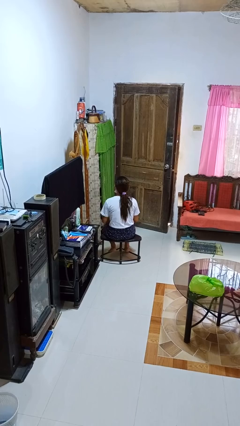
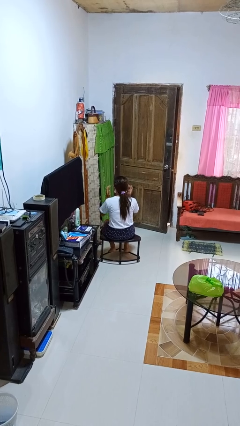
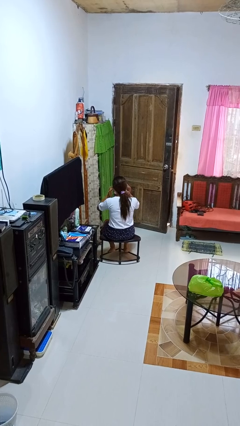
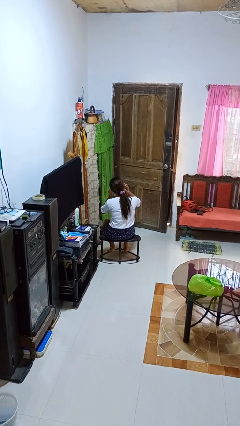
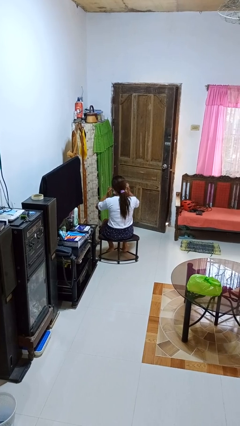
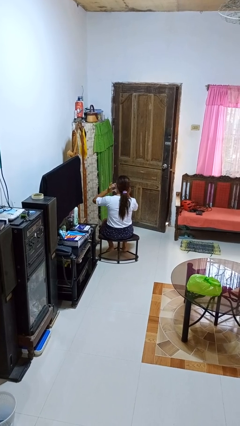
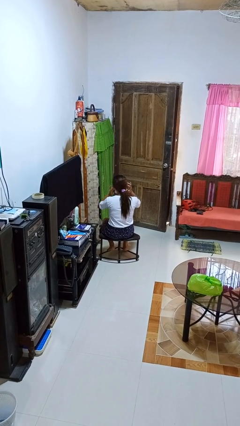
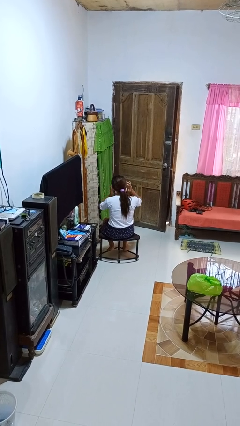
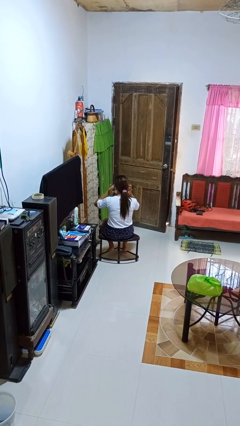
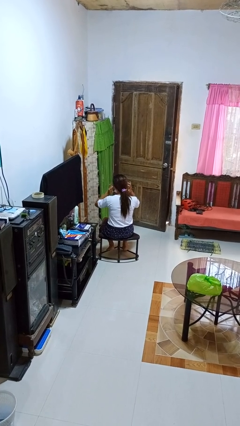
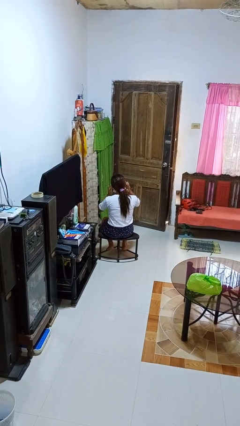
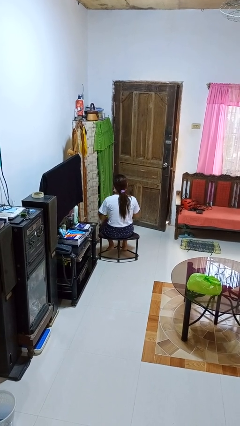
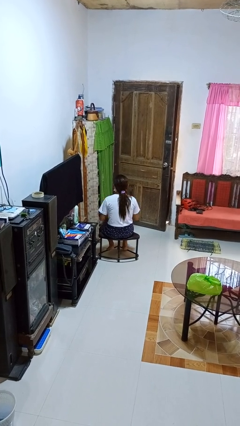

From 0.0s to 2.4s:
person puts fingers in ear

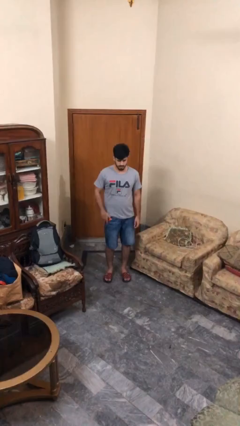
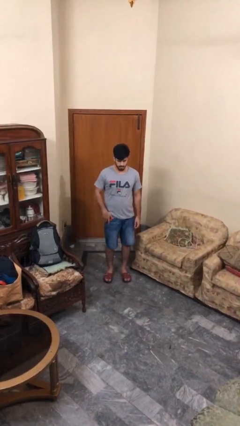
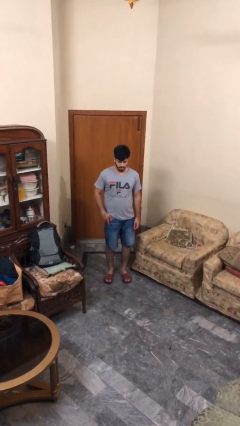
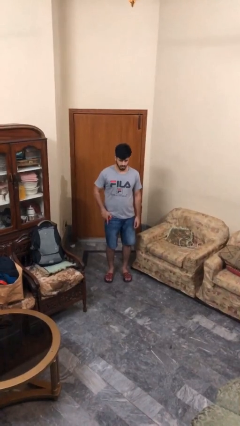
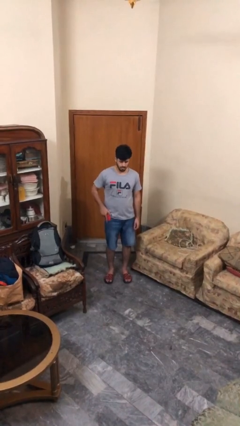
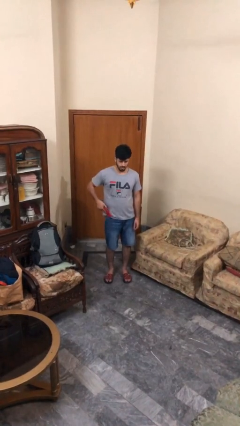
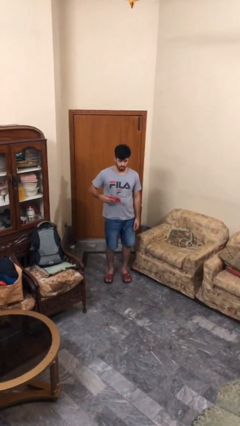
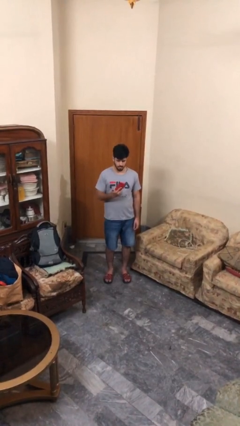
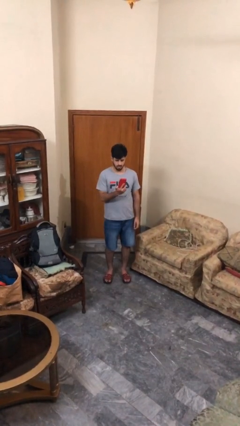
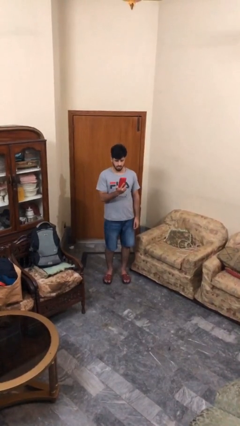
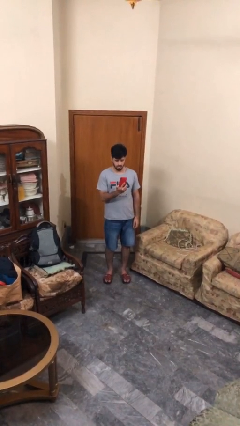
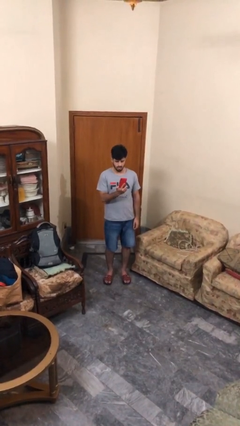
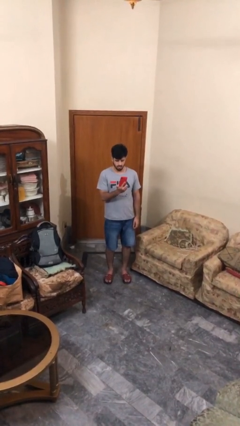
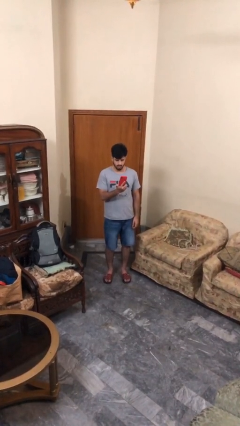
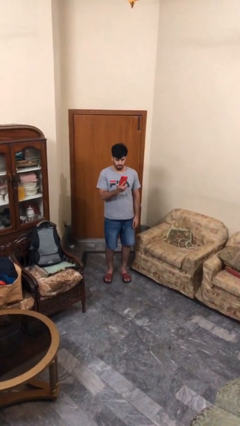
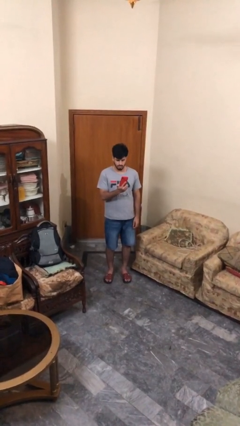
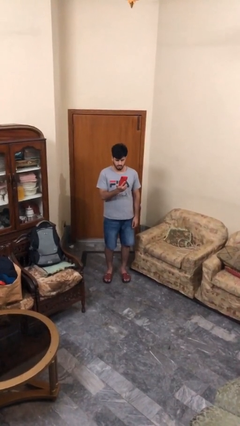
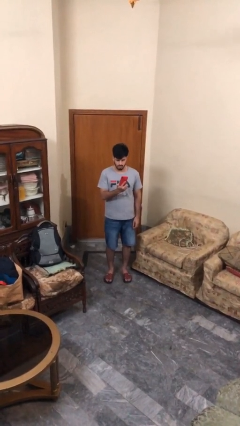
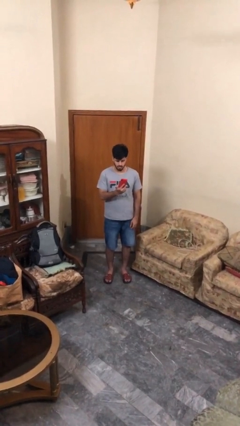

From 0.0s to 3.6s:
person takes phone from pocket

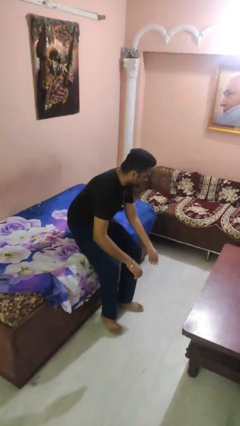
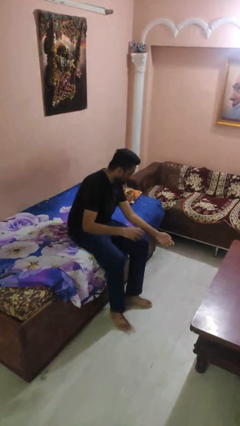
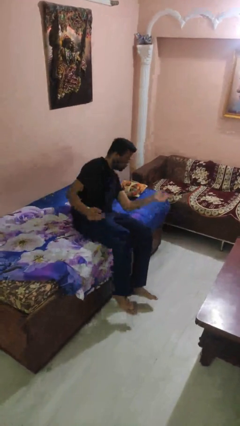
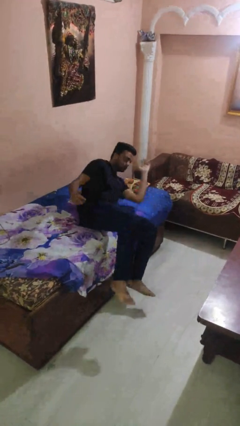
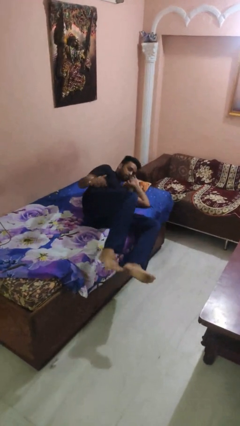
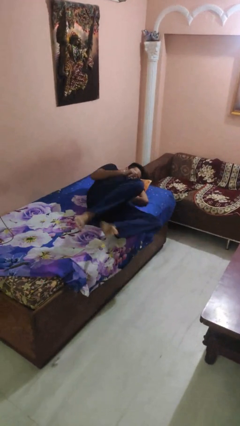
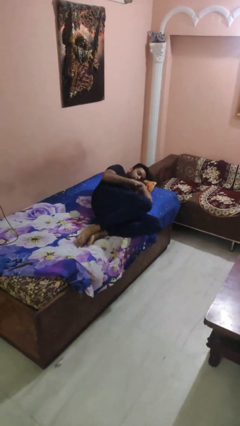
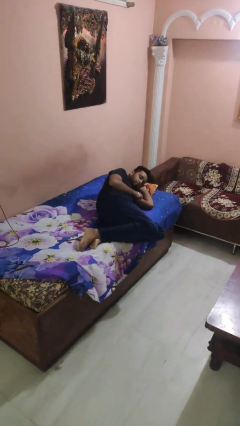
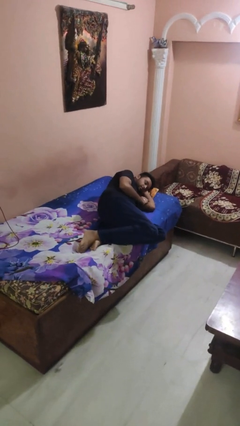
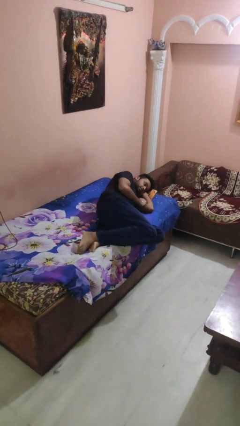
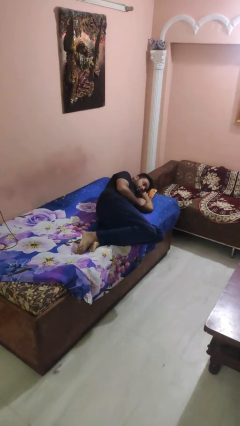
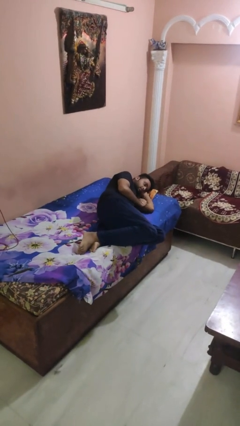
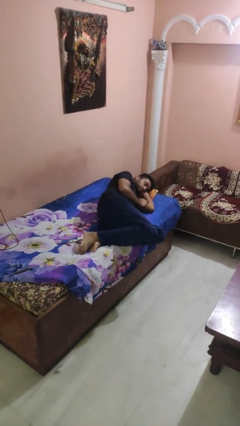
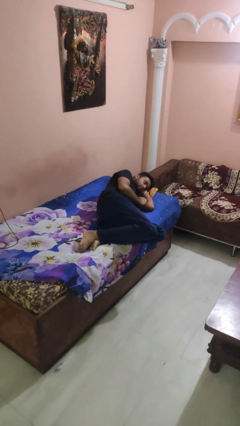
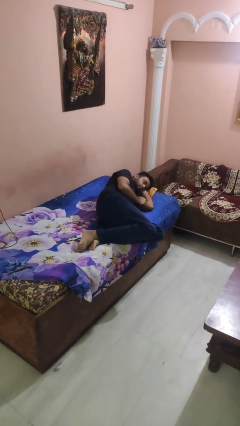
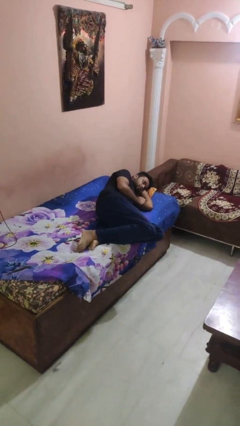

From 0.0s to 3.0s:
person lies down on bed

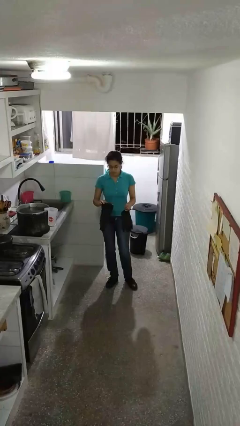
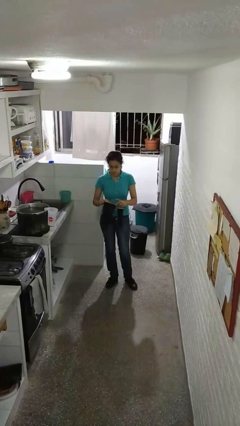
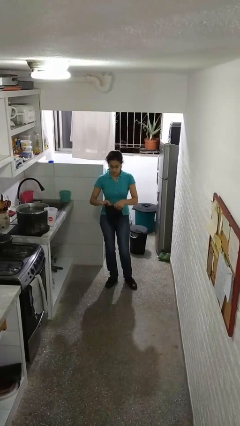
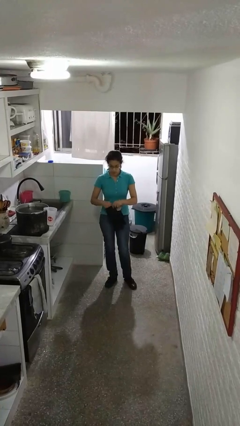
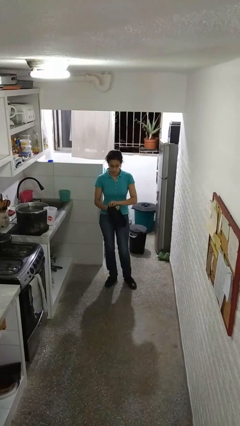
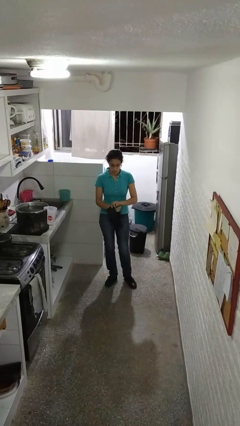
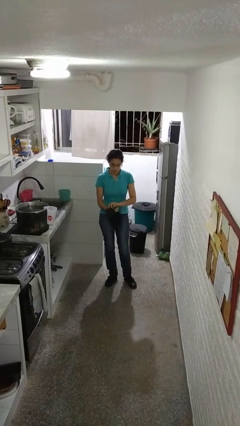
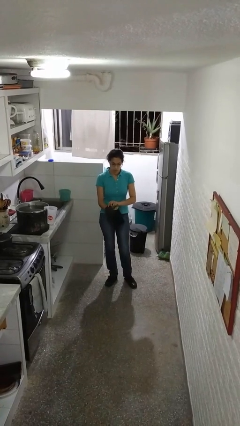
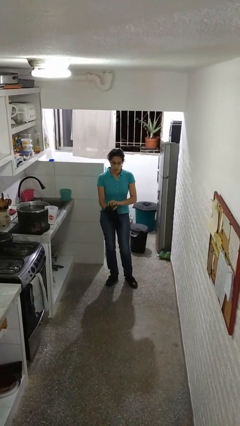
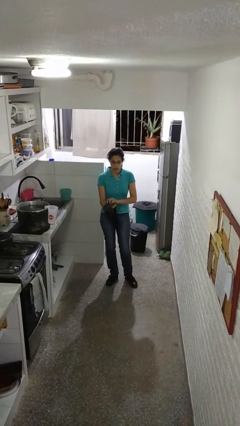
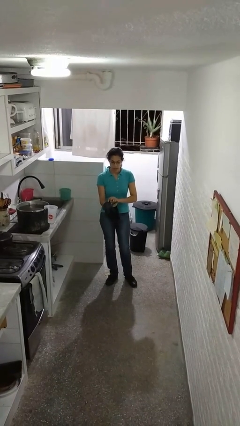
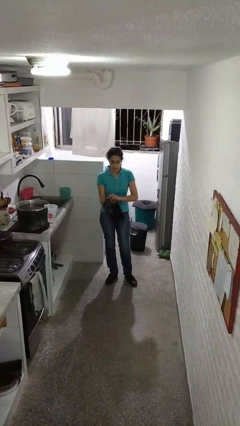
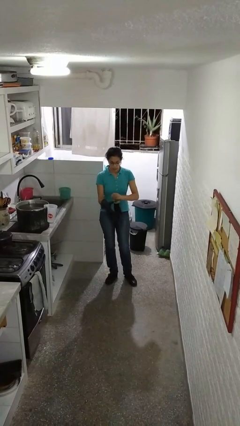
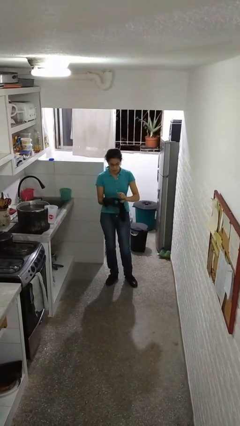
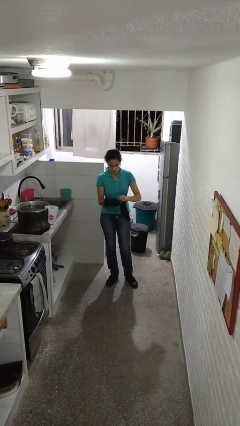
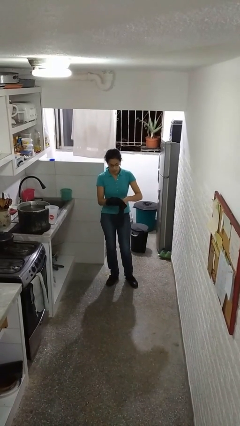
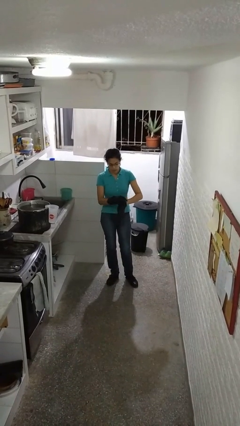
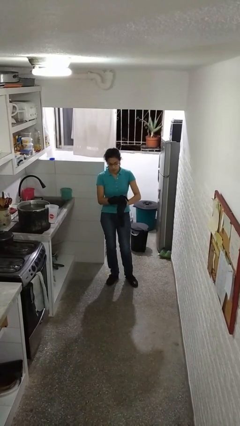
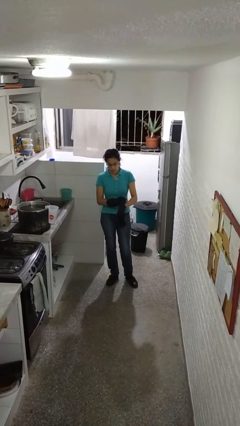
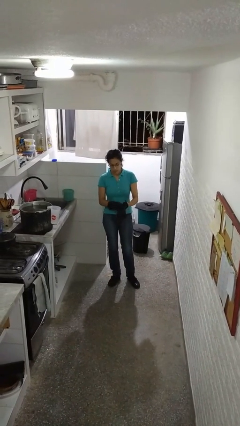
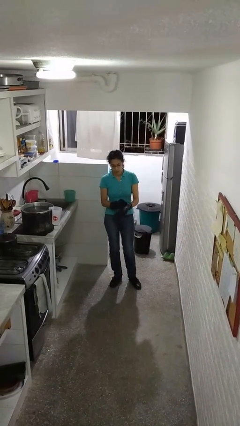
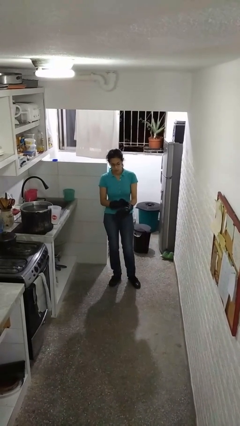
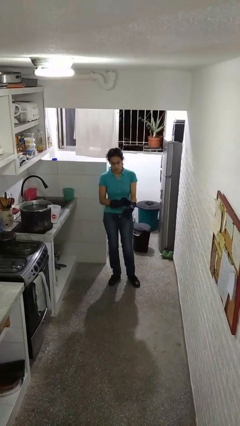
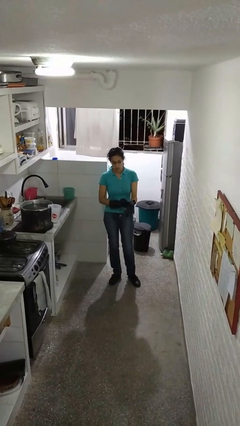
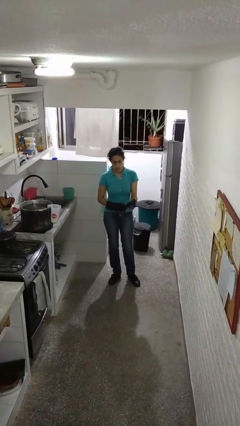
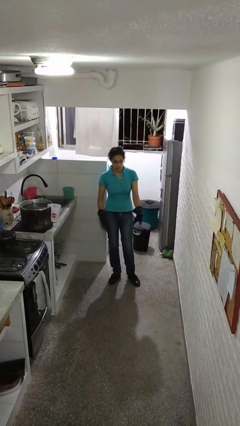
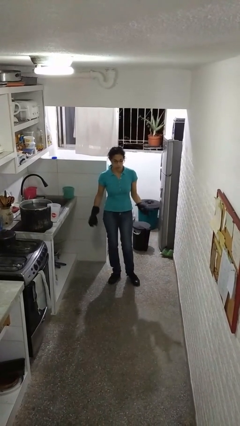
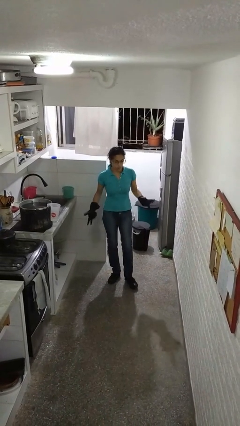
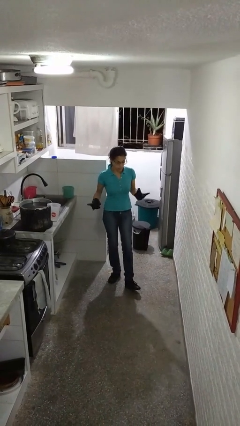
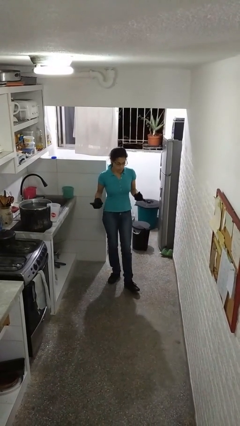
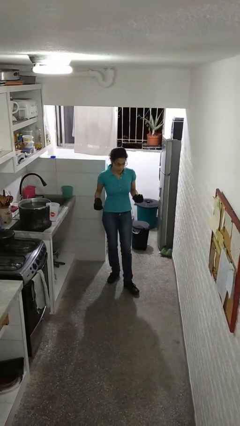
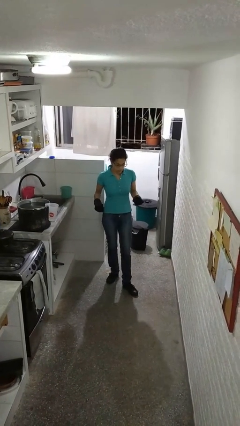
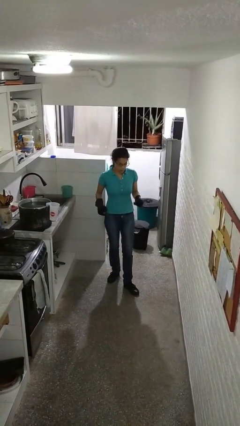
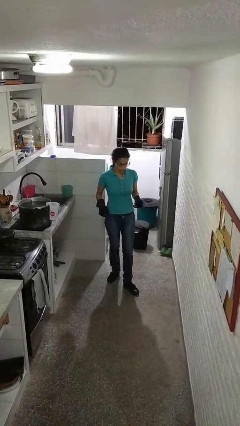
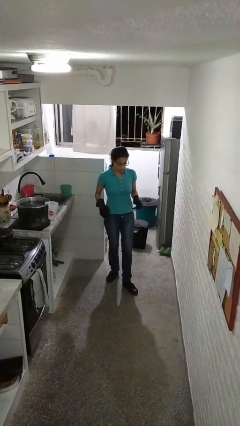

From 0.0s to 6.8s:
person puts on gloves

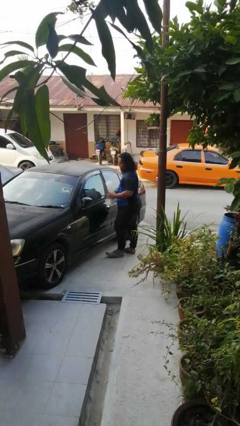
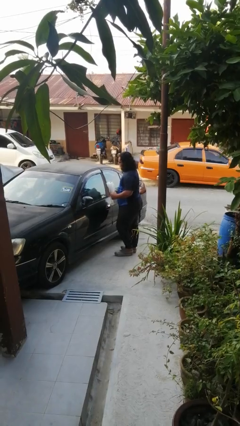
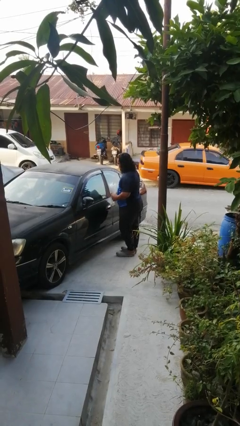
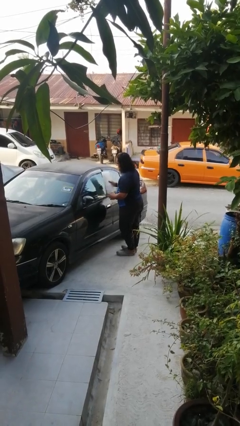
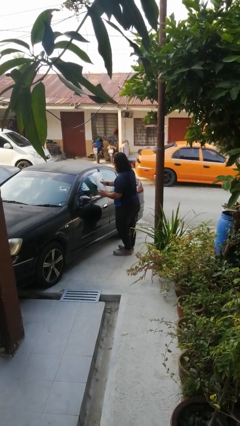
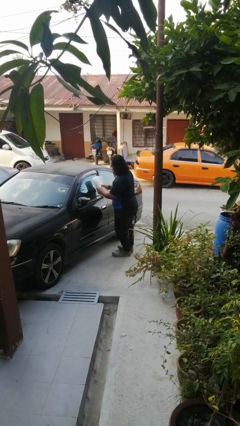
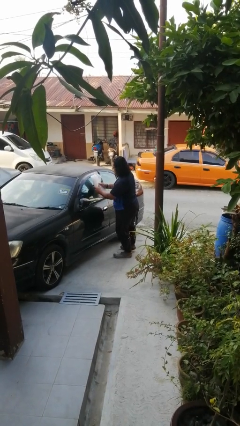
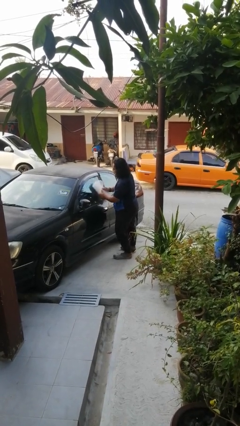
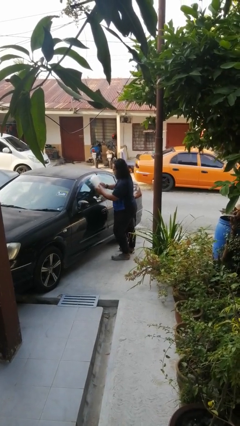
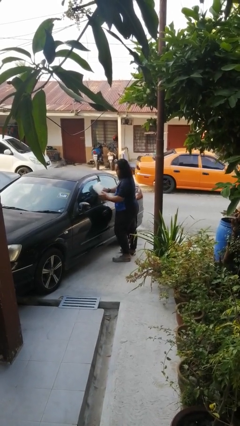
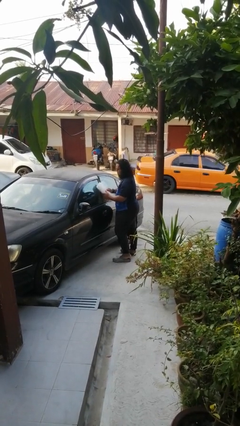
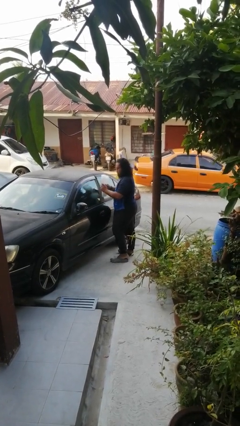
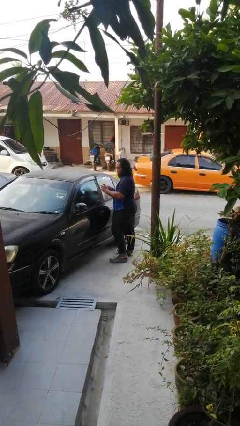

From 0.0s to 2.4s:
person polishes car with rag
